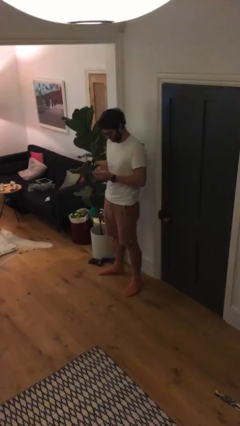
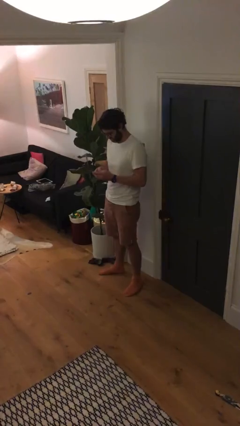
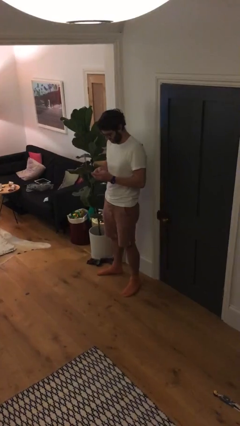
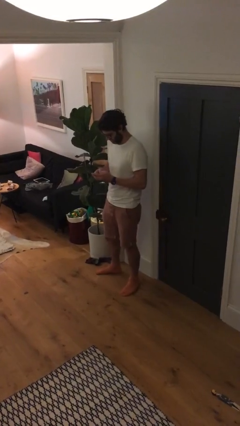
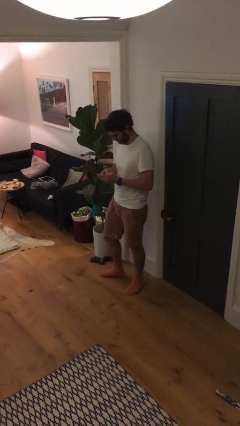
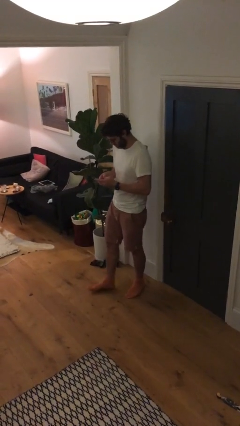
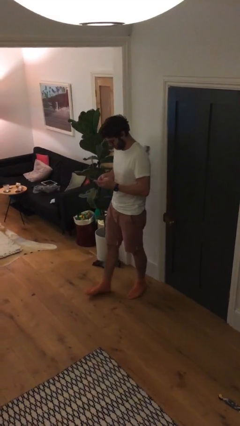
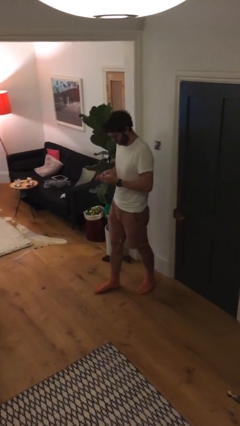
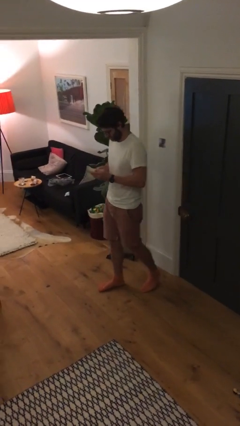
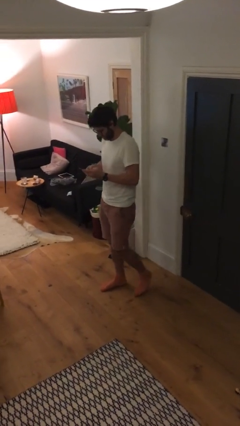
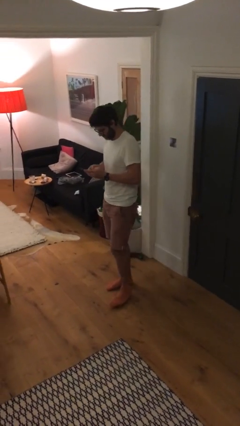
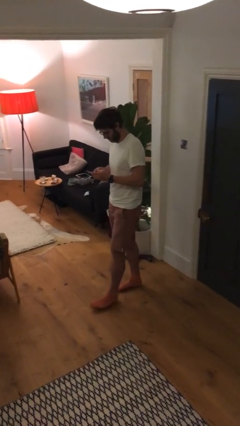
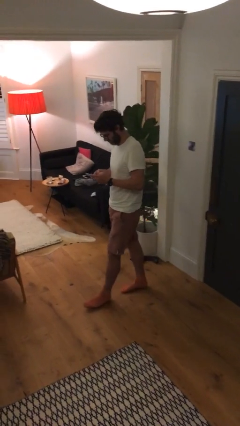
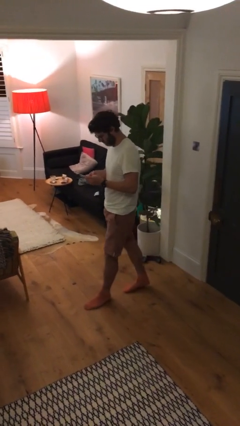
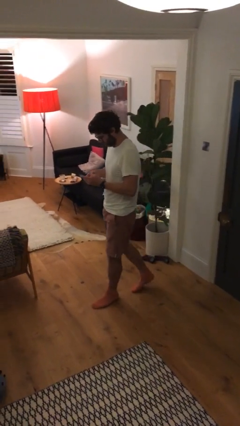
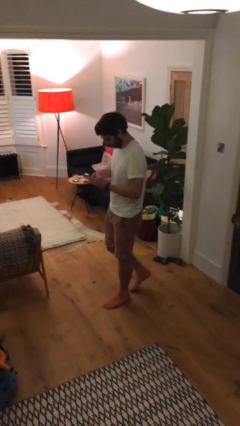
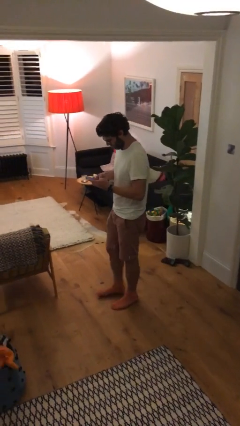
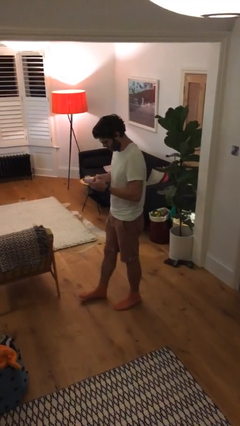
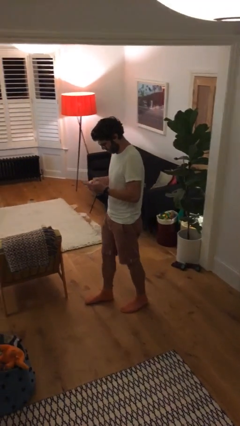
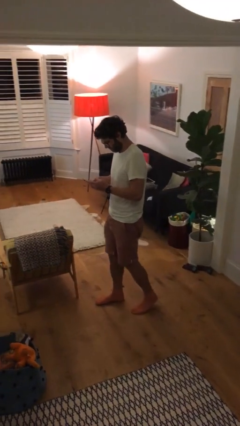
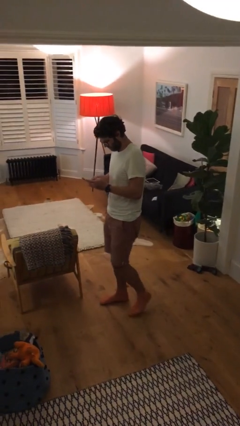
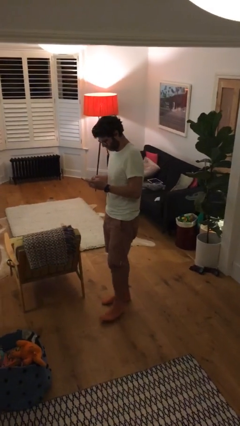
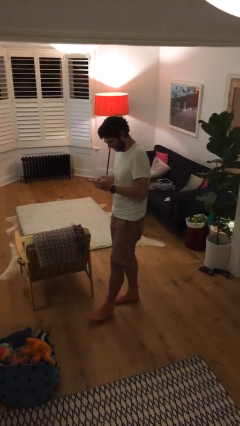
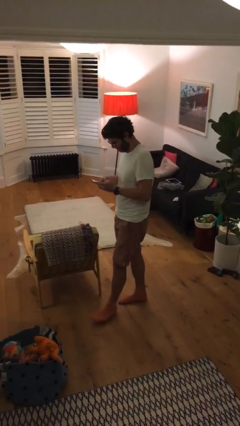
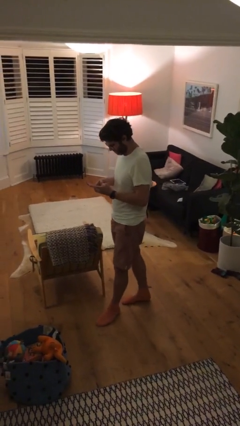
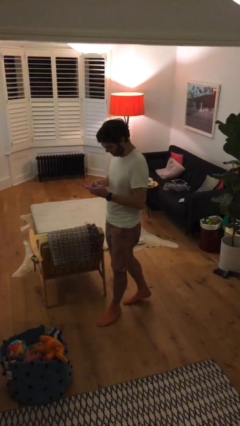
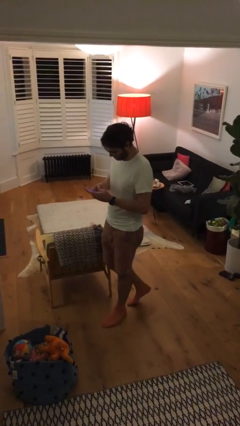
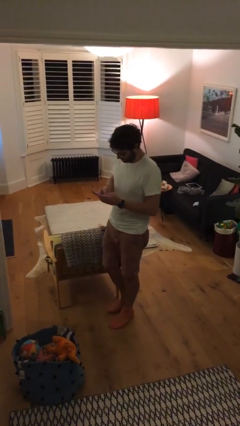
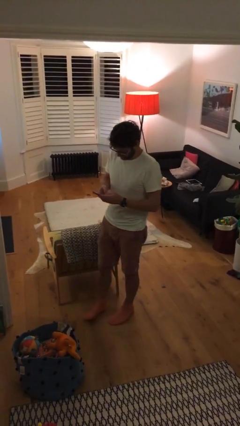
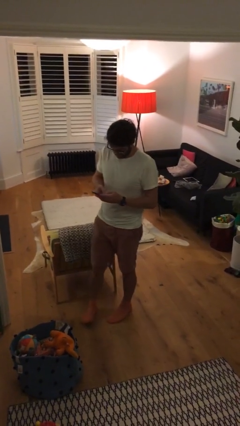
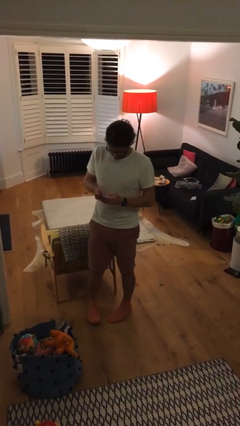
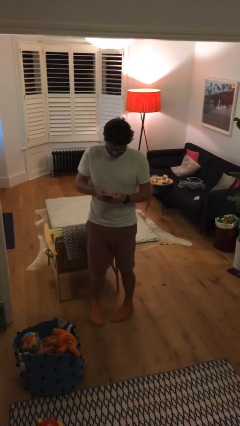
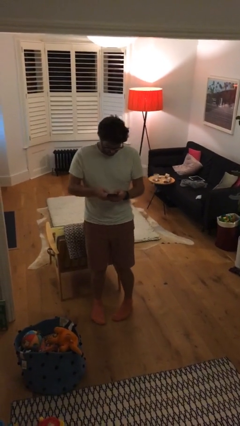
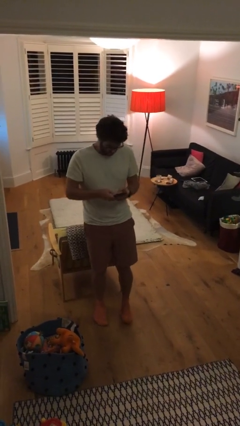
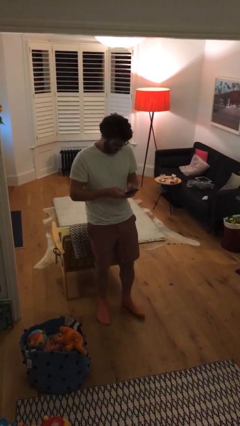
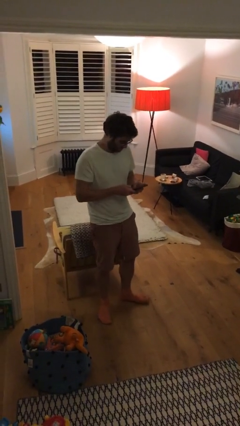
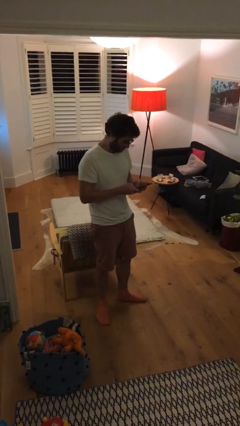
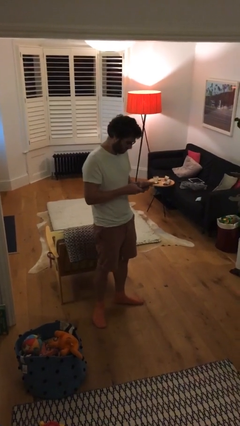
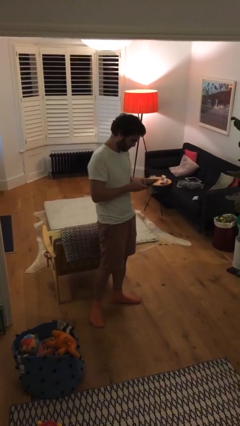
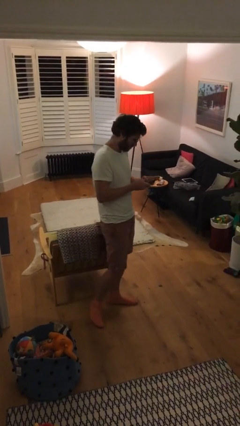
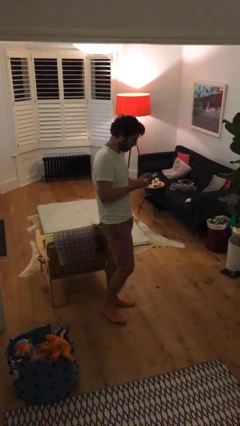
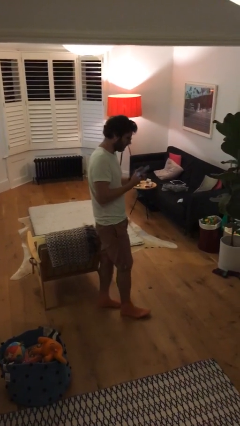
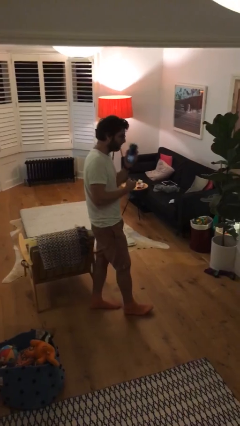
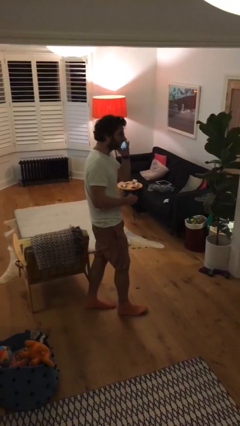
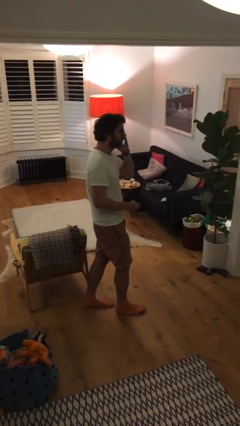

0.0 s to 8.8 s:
person texts on phone

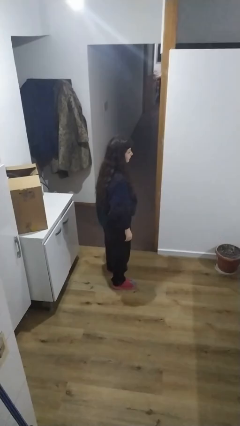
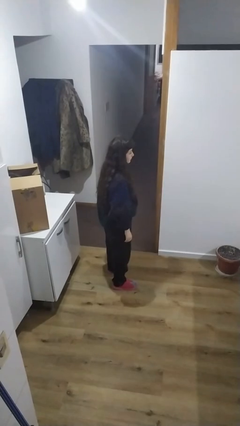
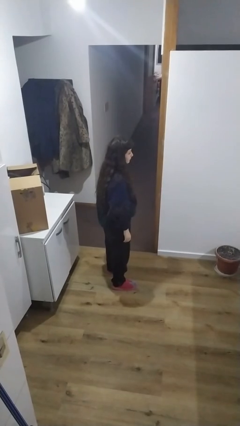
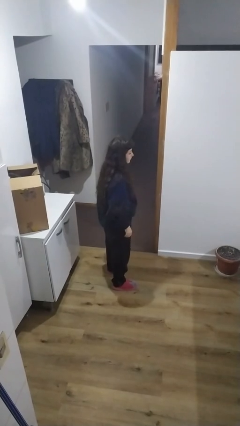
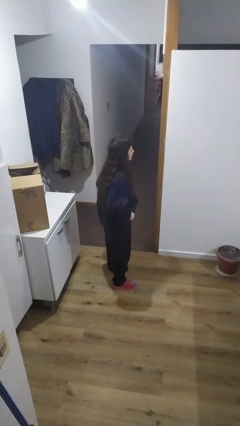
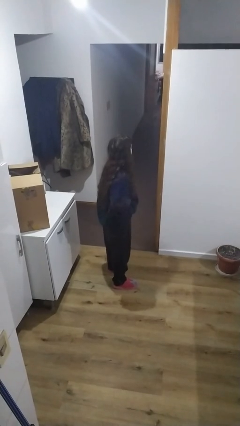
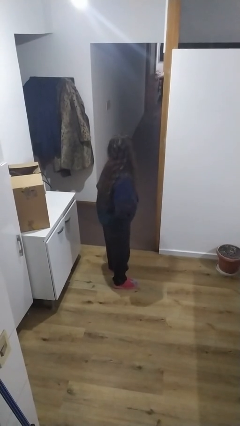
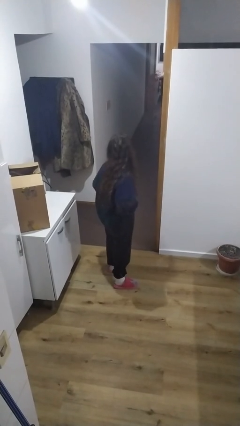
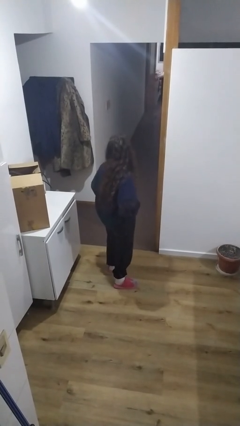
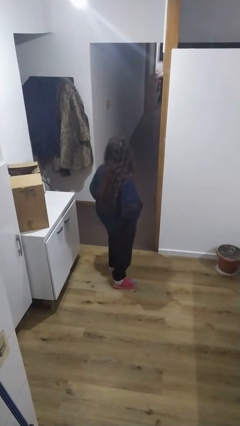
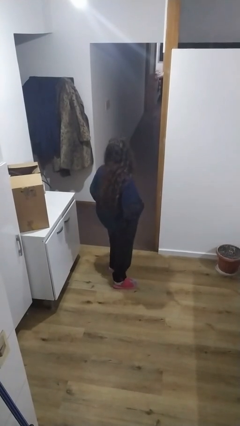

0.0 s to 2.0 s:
person puts hands in back pockets

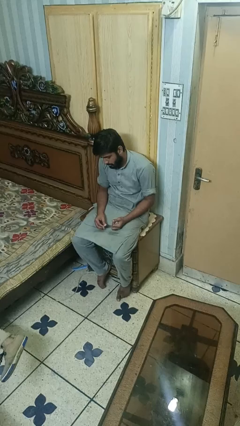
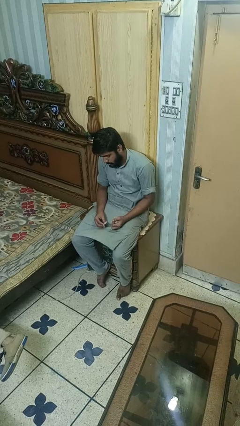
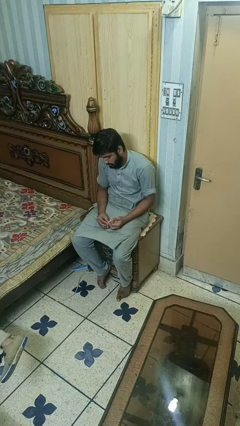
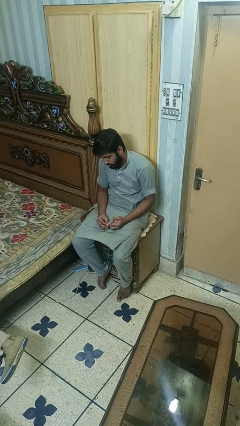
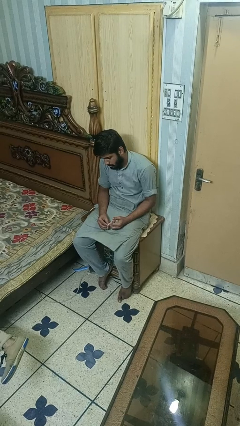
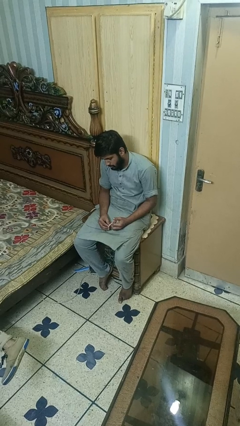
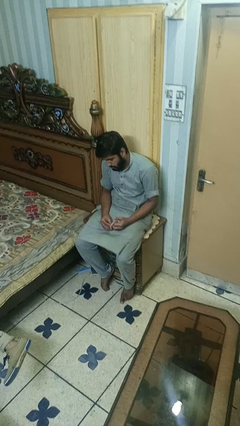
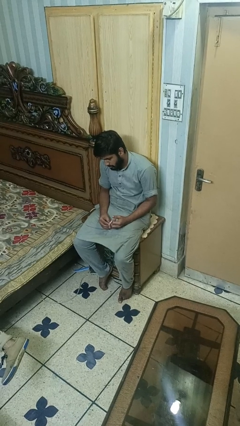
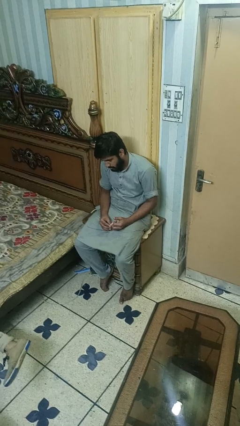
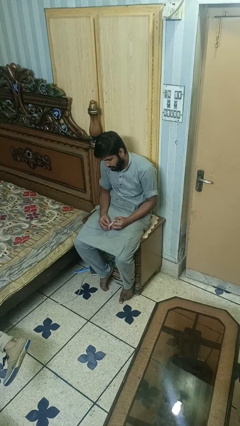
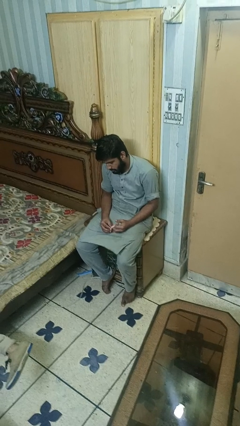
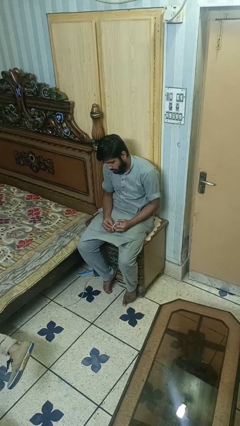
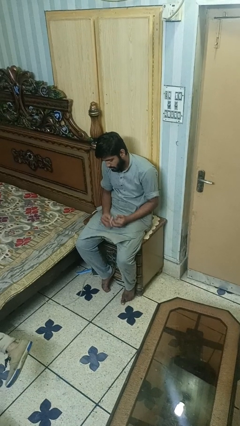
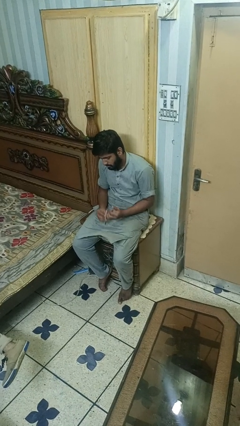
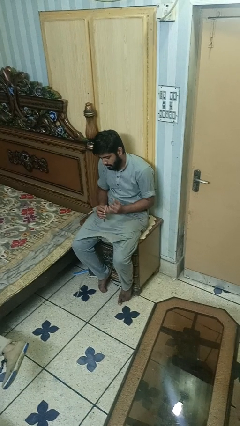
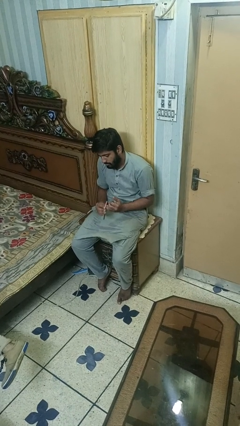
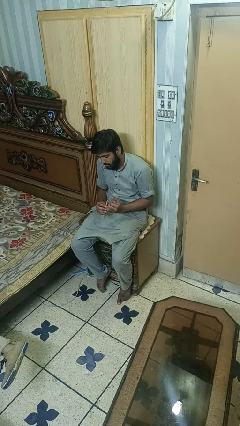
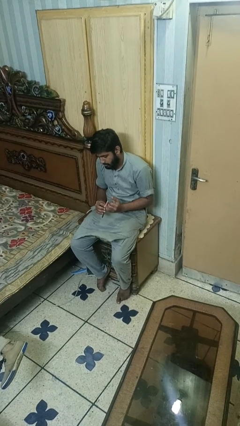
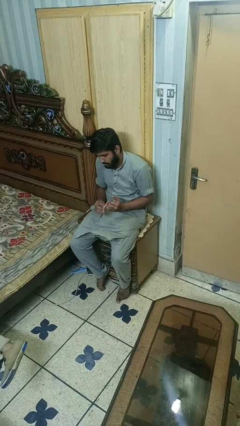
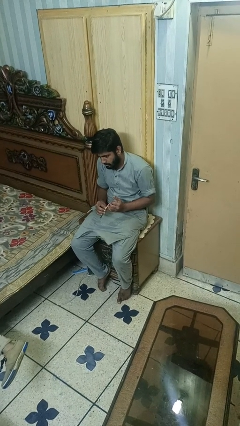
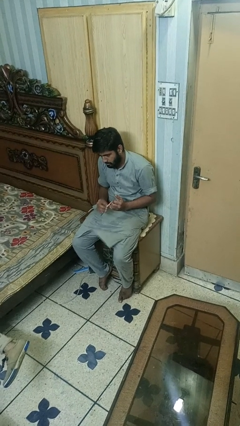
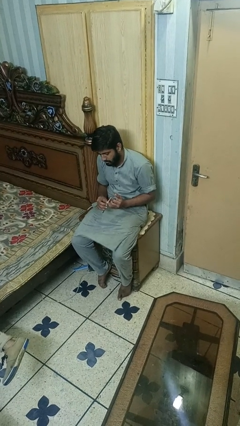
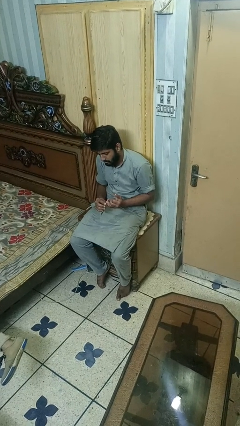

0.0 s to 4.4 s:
person files fingernails

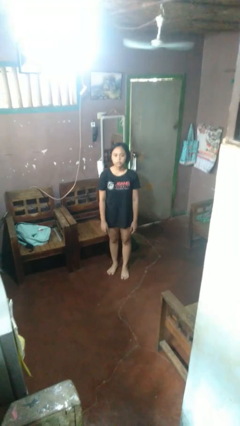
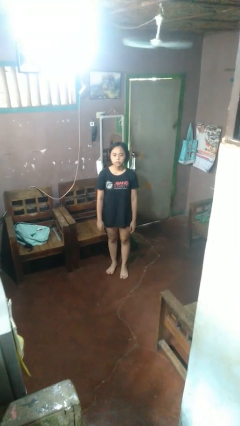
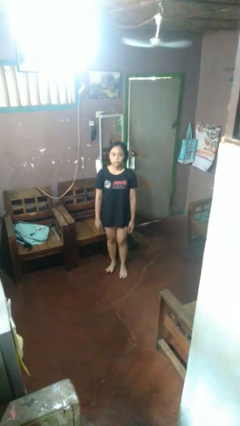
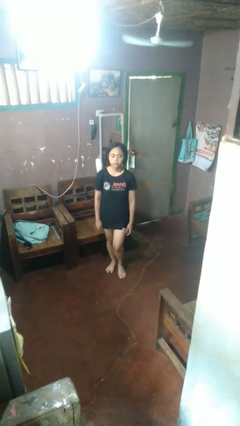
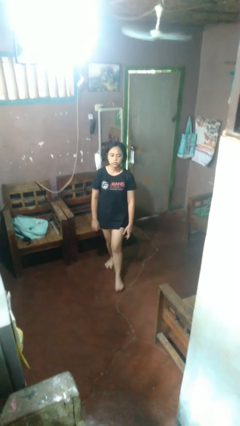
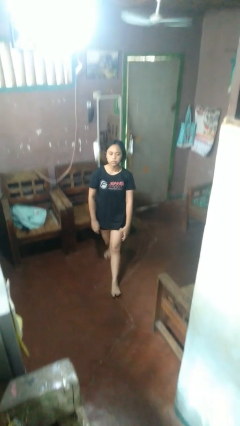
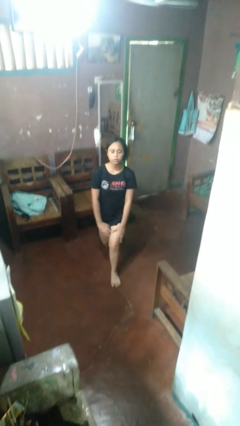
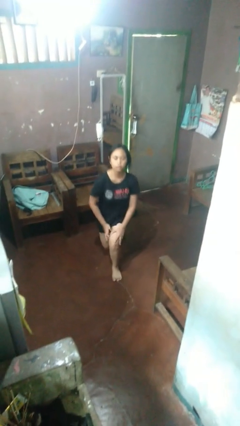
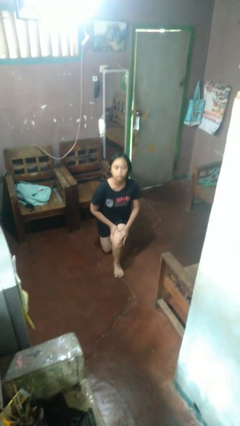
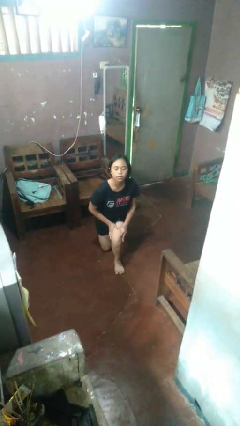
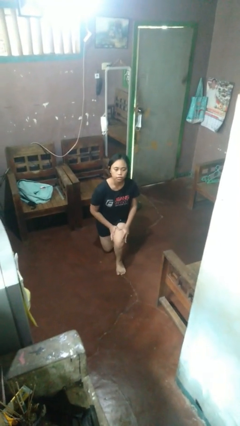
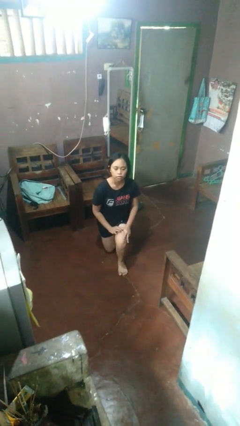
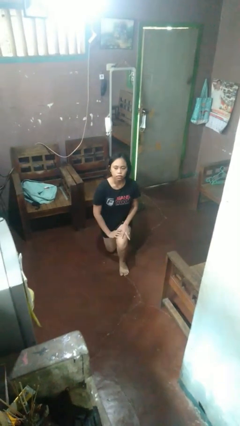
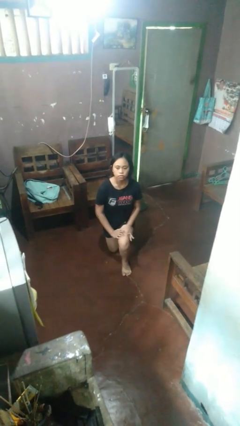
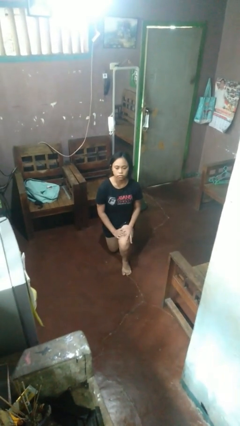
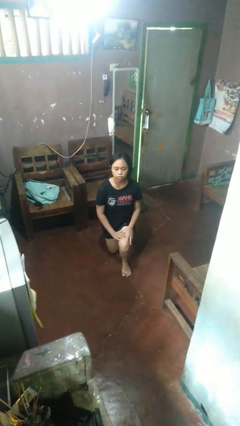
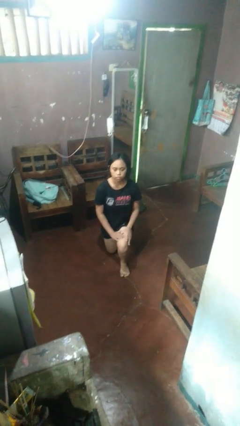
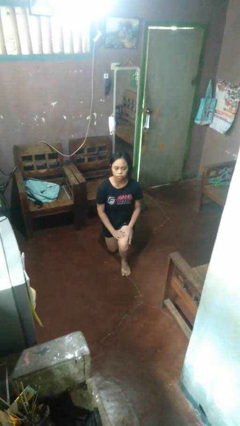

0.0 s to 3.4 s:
person kneels
